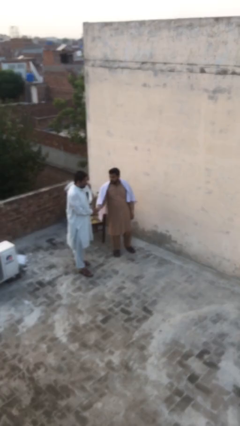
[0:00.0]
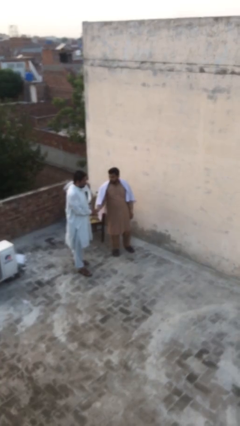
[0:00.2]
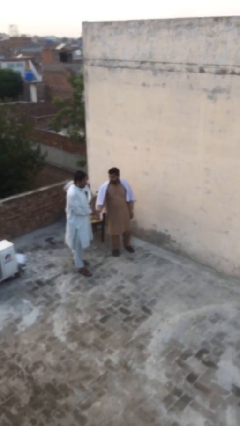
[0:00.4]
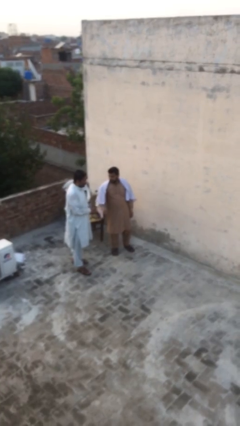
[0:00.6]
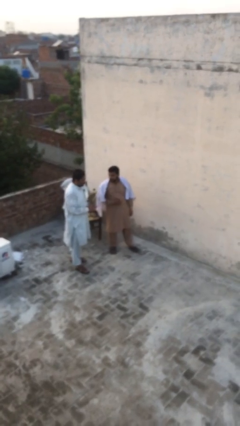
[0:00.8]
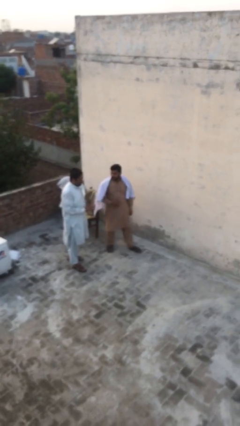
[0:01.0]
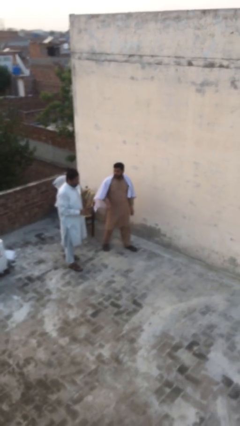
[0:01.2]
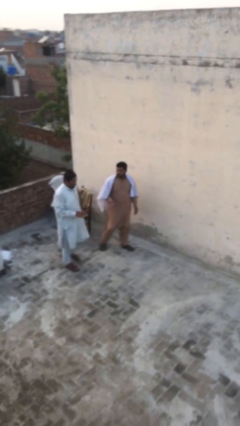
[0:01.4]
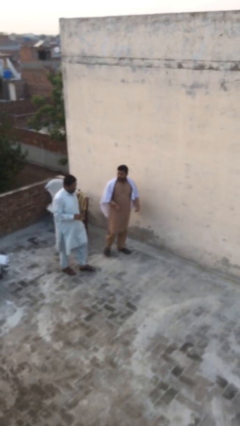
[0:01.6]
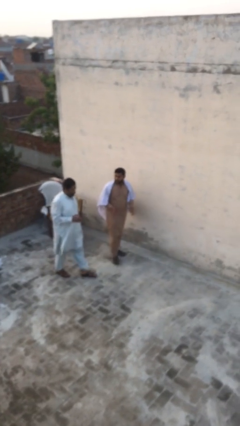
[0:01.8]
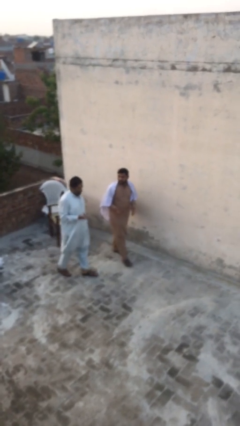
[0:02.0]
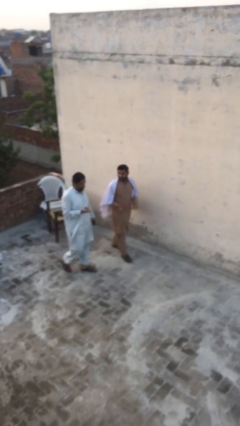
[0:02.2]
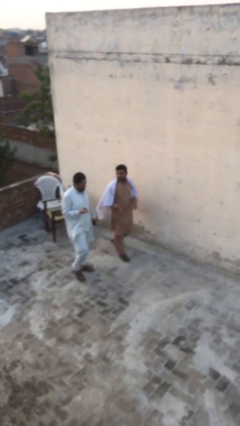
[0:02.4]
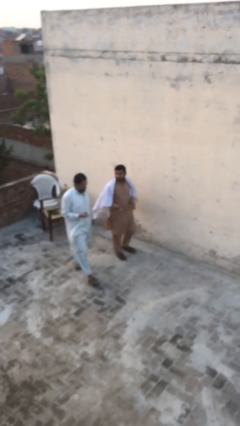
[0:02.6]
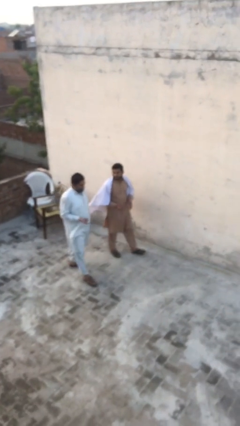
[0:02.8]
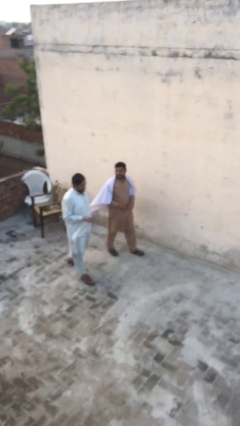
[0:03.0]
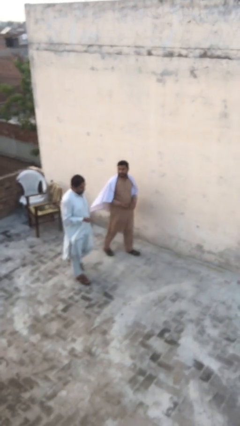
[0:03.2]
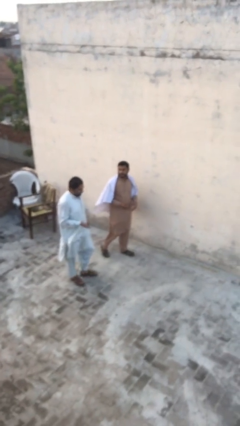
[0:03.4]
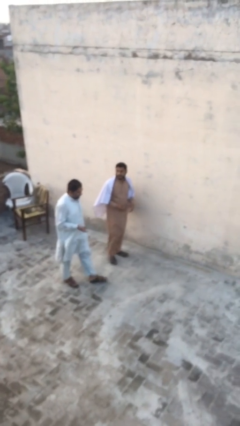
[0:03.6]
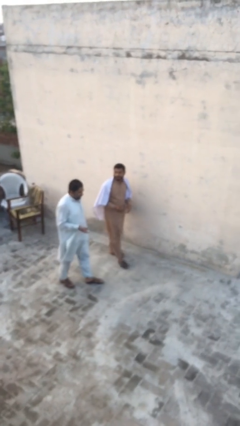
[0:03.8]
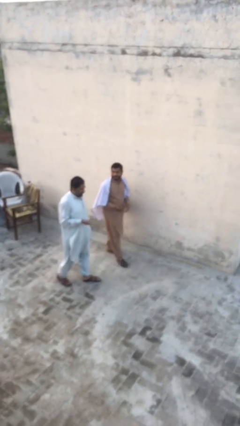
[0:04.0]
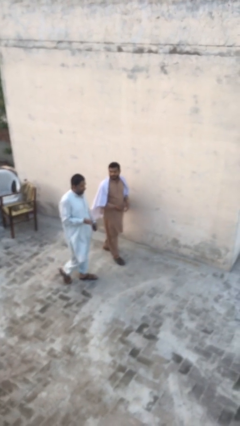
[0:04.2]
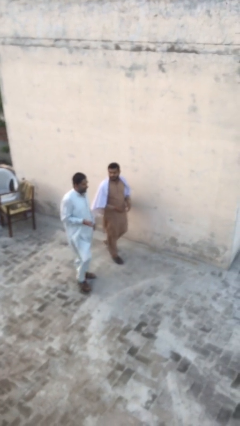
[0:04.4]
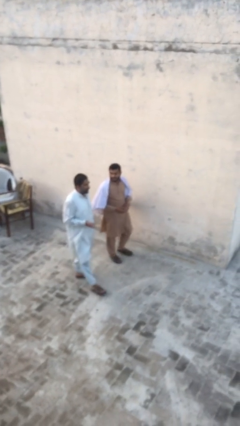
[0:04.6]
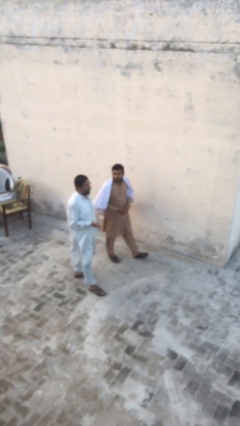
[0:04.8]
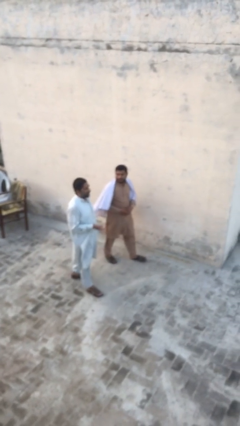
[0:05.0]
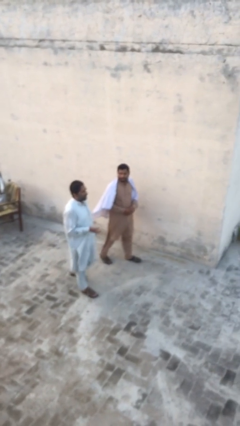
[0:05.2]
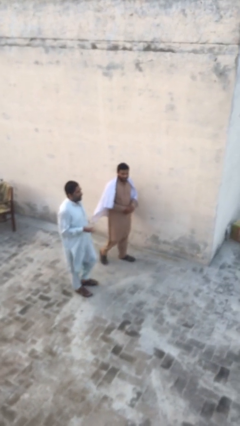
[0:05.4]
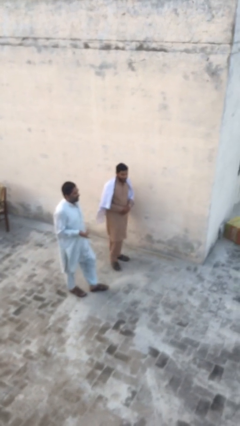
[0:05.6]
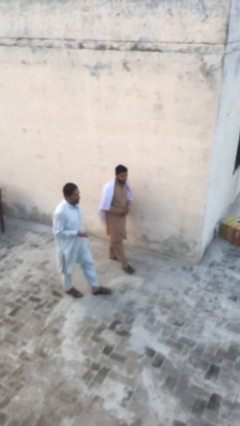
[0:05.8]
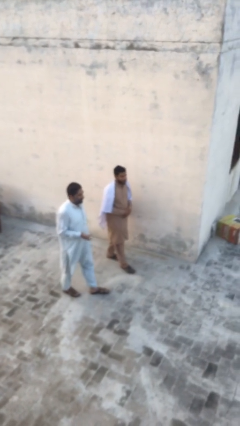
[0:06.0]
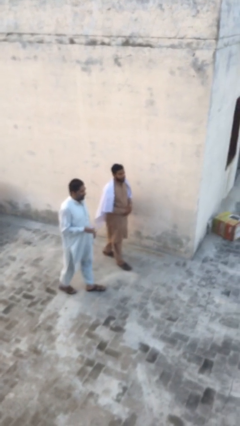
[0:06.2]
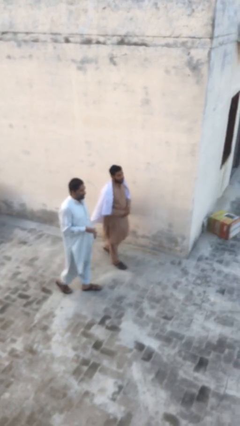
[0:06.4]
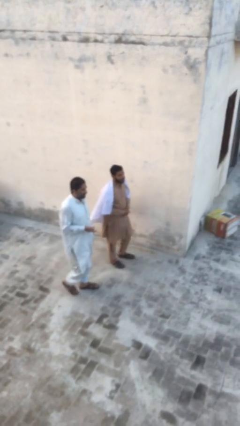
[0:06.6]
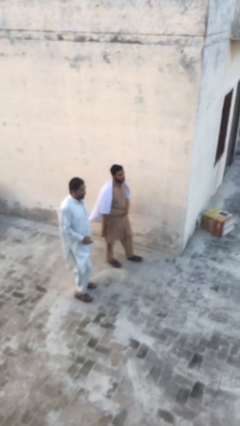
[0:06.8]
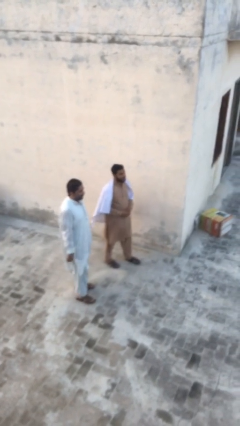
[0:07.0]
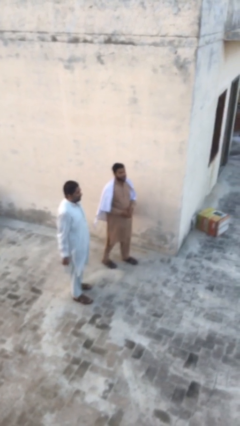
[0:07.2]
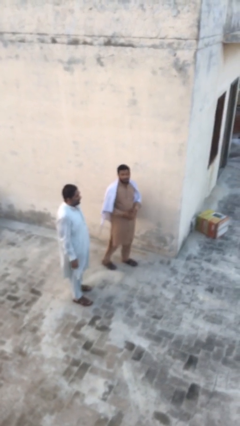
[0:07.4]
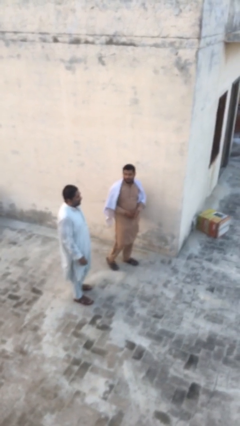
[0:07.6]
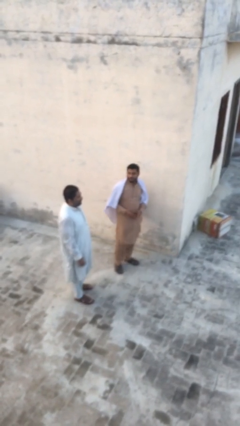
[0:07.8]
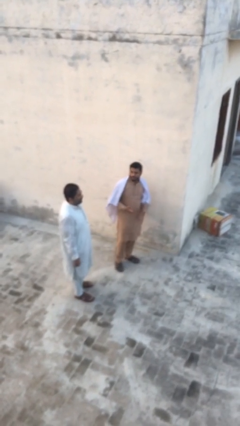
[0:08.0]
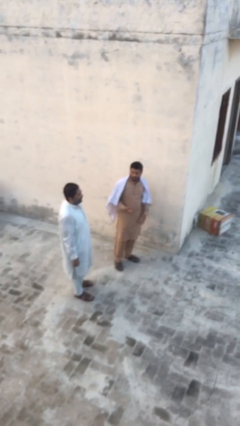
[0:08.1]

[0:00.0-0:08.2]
person talks to person

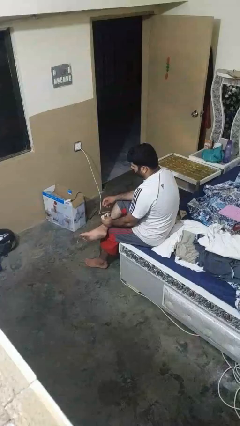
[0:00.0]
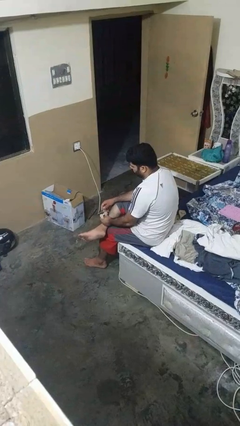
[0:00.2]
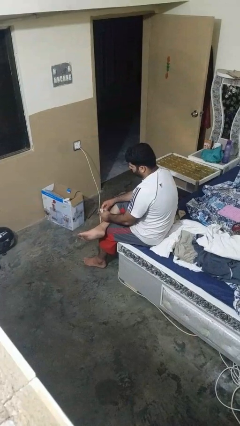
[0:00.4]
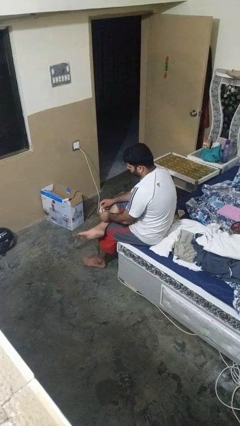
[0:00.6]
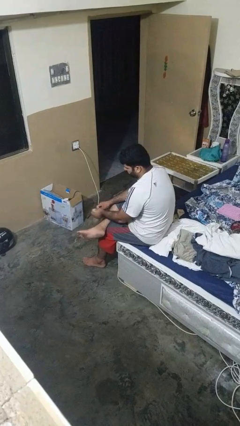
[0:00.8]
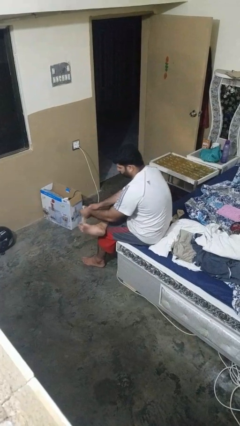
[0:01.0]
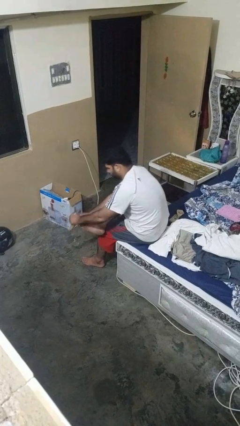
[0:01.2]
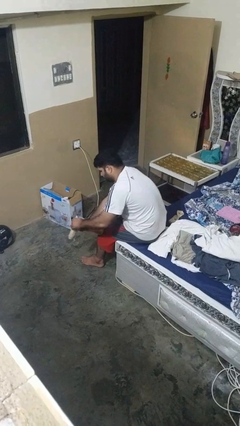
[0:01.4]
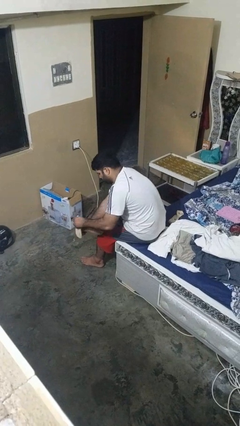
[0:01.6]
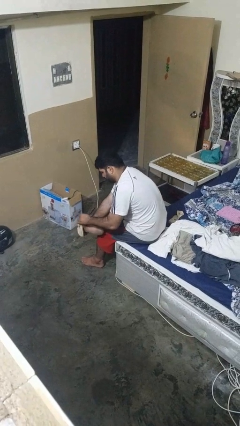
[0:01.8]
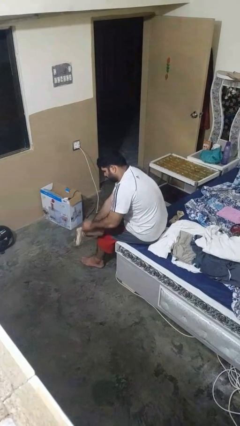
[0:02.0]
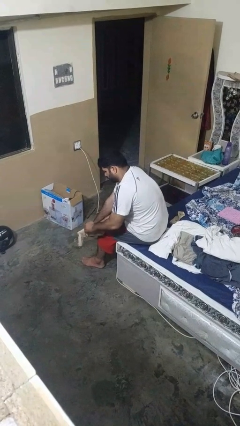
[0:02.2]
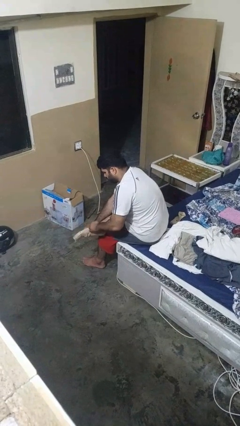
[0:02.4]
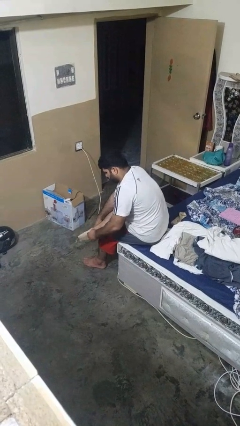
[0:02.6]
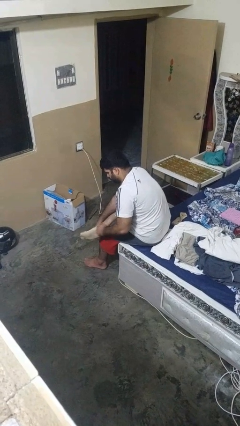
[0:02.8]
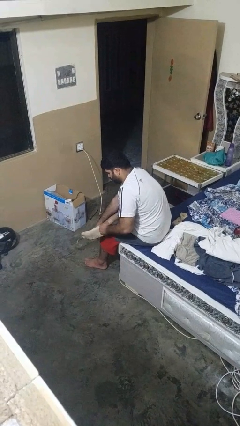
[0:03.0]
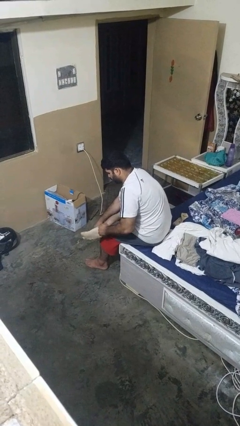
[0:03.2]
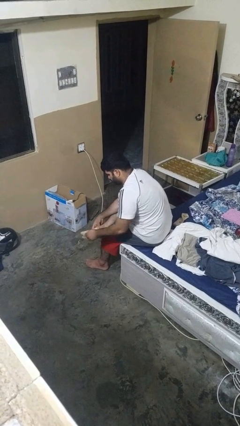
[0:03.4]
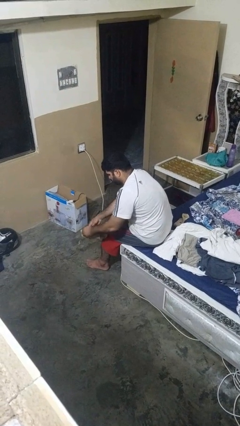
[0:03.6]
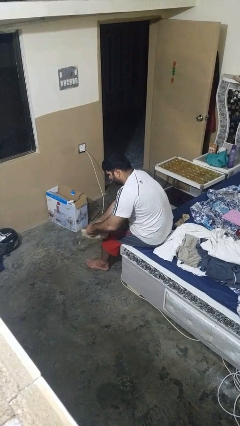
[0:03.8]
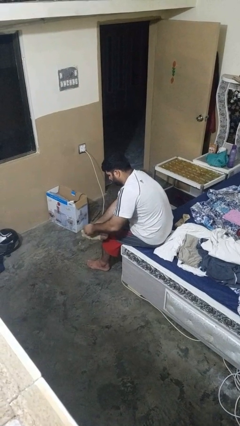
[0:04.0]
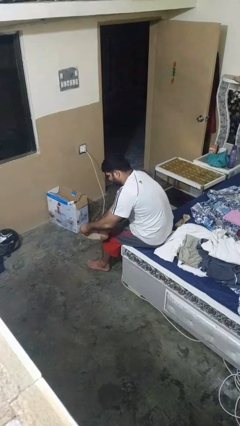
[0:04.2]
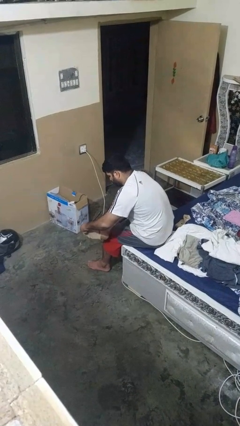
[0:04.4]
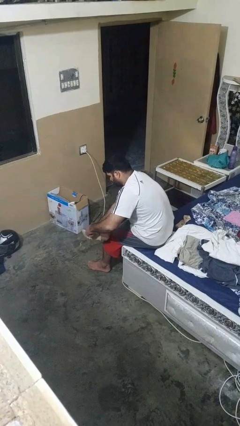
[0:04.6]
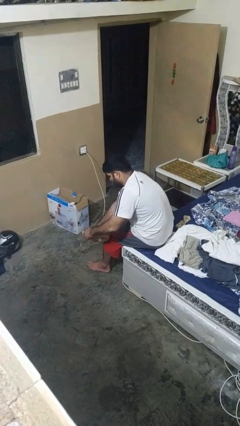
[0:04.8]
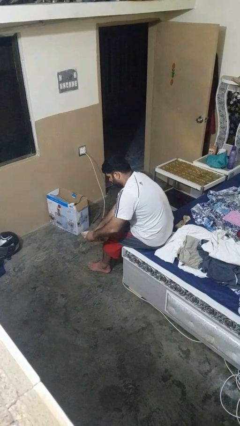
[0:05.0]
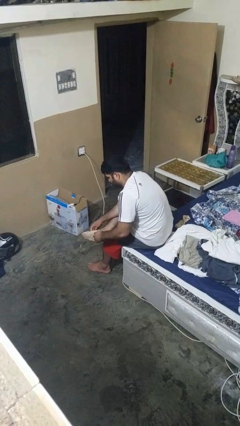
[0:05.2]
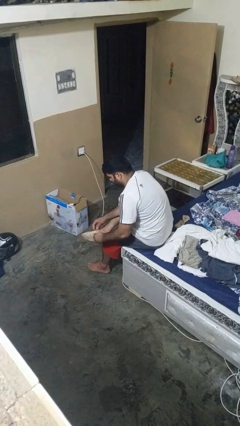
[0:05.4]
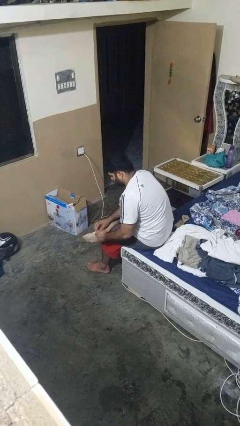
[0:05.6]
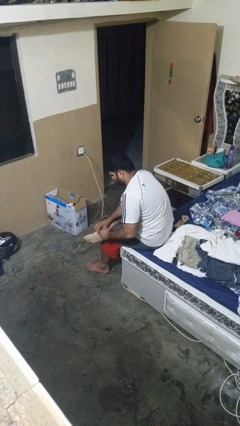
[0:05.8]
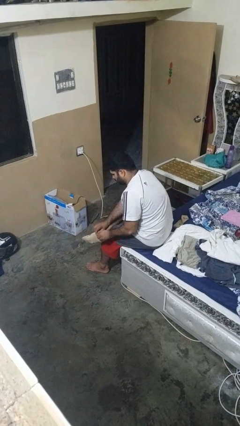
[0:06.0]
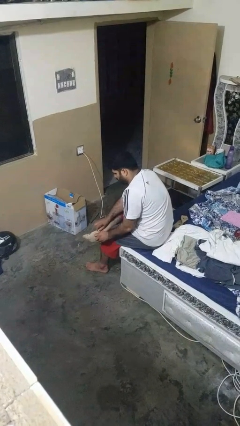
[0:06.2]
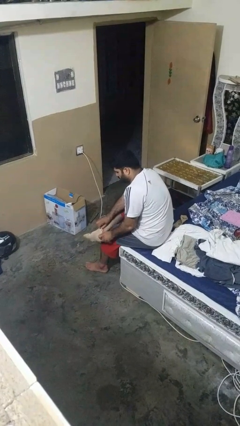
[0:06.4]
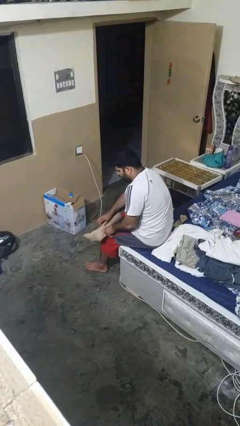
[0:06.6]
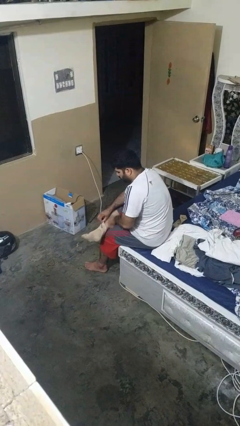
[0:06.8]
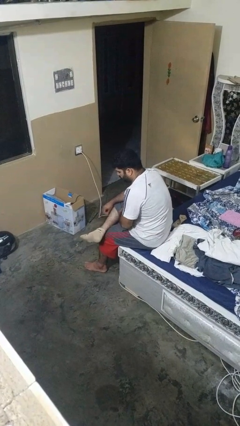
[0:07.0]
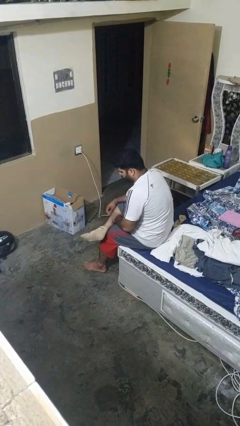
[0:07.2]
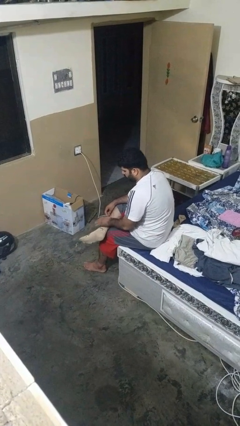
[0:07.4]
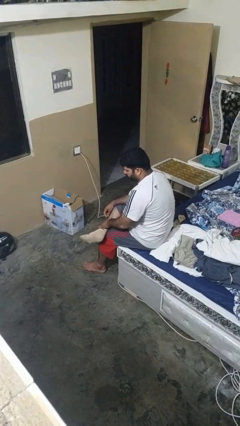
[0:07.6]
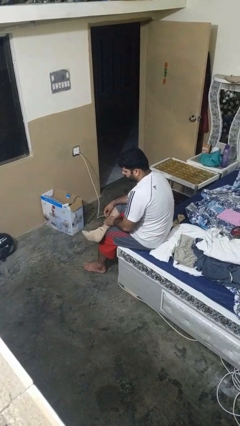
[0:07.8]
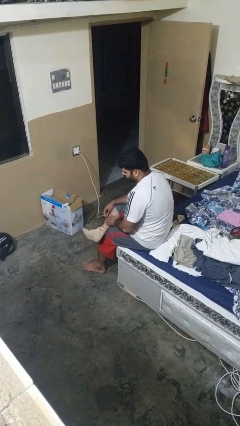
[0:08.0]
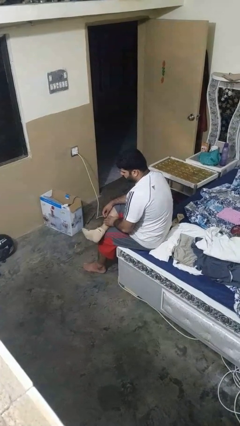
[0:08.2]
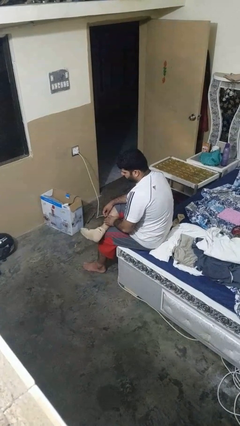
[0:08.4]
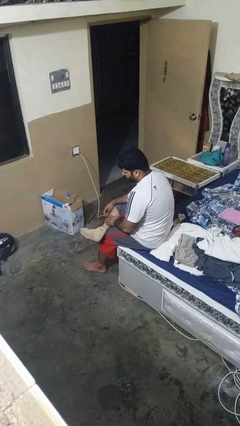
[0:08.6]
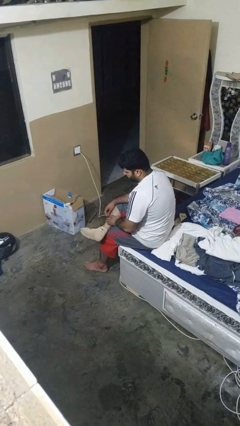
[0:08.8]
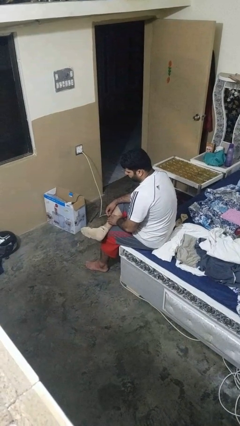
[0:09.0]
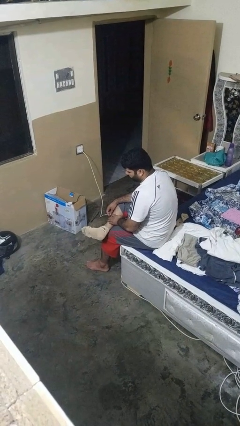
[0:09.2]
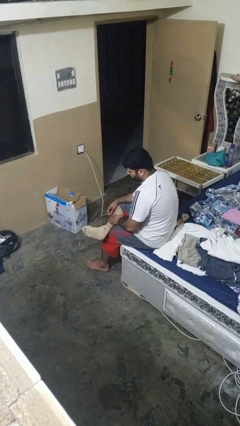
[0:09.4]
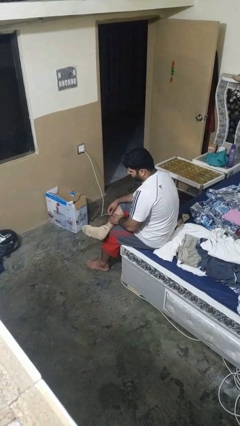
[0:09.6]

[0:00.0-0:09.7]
person puts on socks
